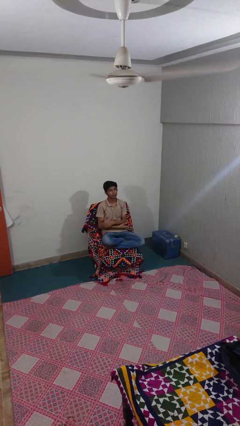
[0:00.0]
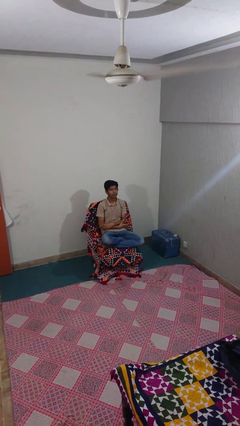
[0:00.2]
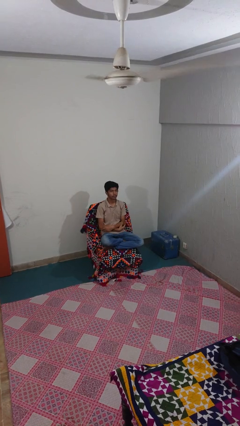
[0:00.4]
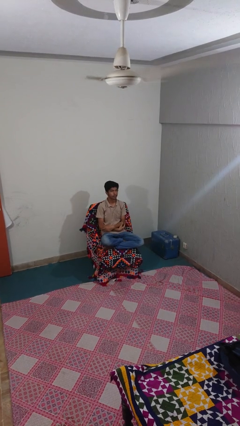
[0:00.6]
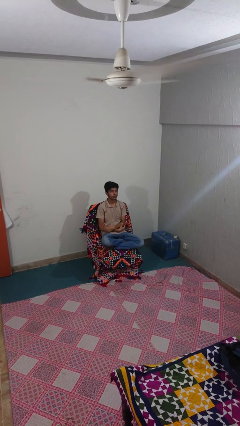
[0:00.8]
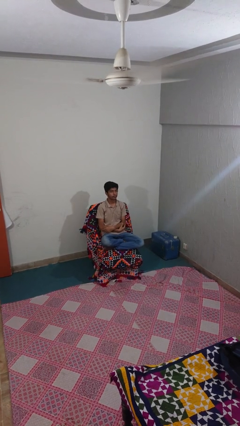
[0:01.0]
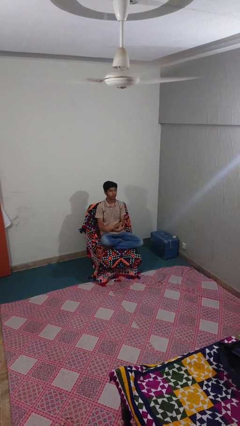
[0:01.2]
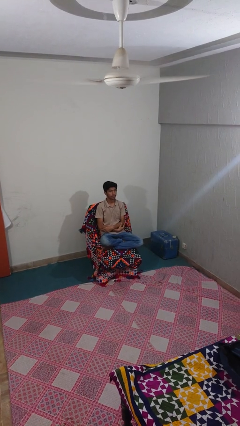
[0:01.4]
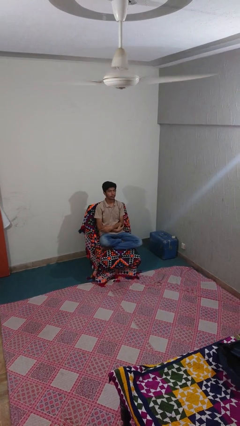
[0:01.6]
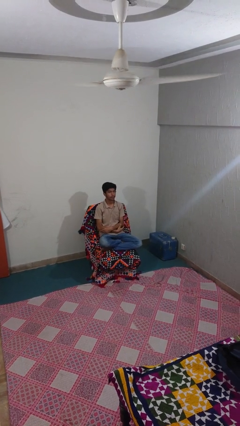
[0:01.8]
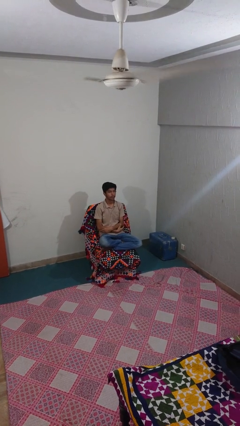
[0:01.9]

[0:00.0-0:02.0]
person gestures lower hand

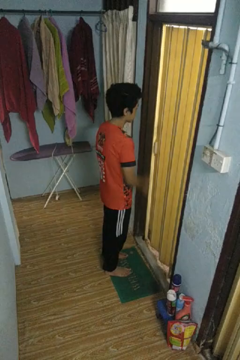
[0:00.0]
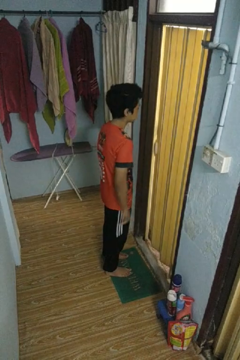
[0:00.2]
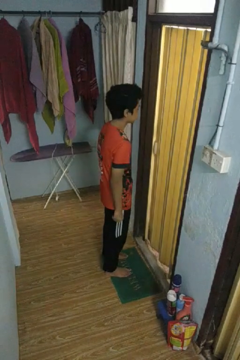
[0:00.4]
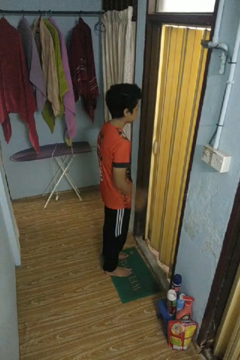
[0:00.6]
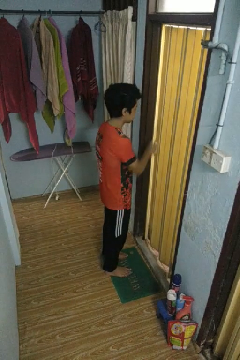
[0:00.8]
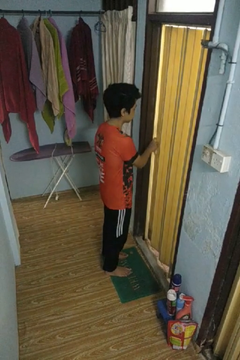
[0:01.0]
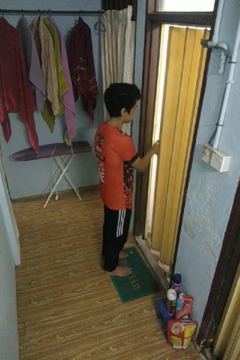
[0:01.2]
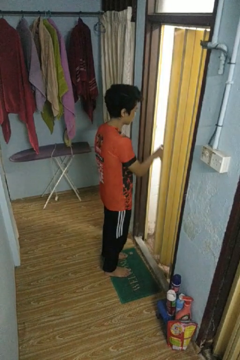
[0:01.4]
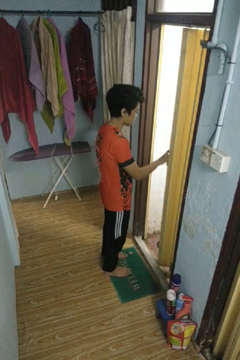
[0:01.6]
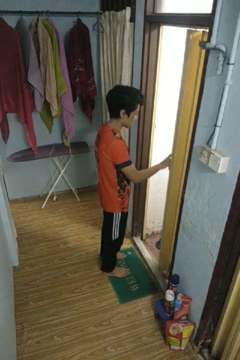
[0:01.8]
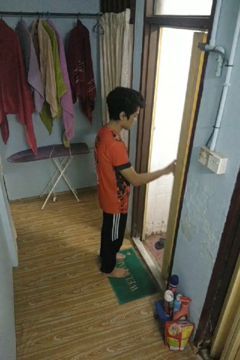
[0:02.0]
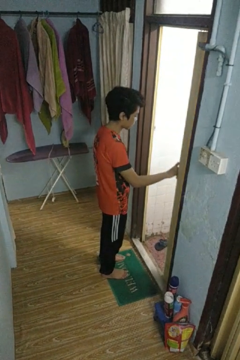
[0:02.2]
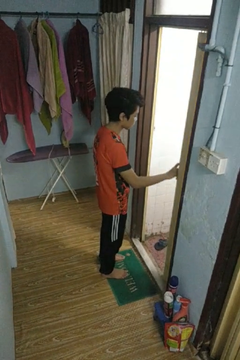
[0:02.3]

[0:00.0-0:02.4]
person opens sliding door

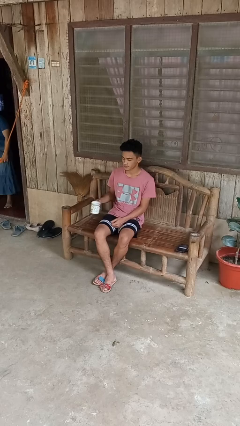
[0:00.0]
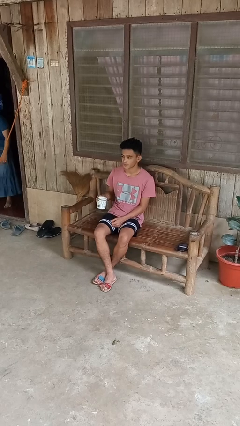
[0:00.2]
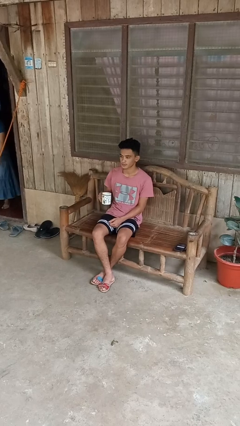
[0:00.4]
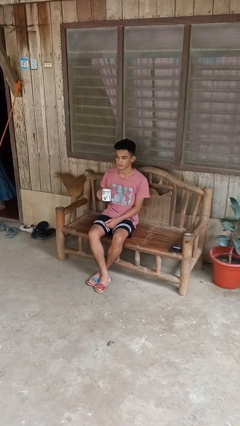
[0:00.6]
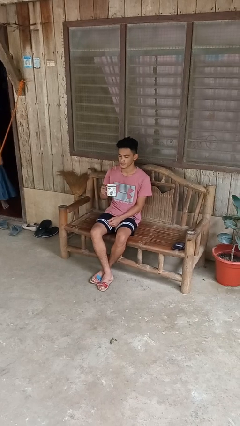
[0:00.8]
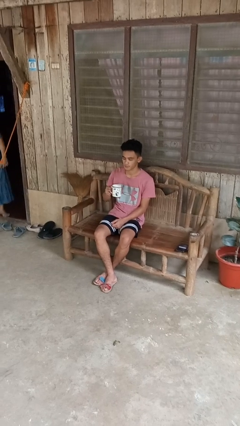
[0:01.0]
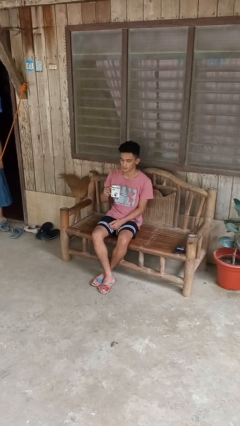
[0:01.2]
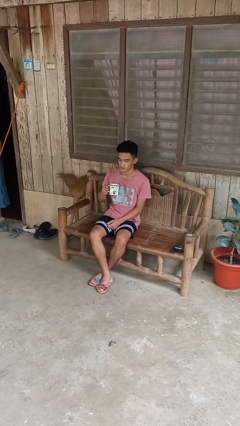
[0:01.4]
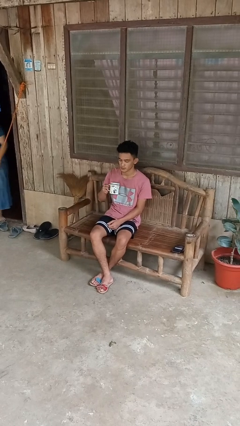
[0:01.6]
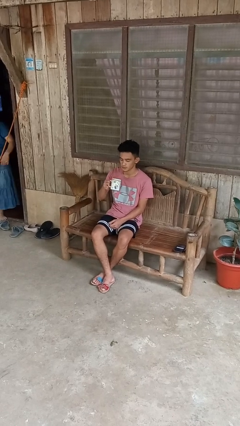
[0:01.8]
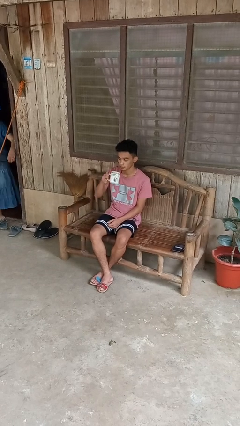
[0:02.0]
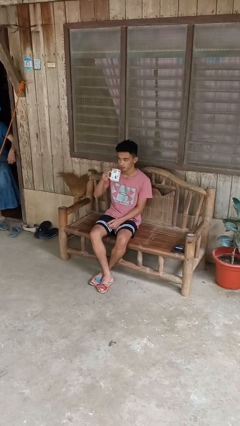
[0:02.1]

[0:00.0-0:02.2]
person picks up object from table

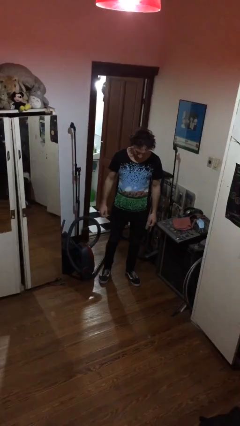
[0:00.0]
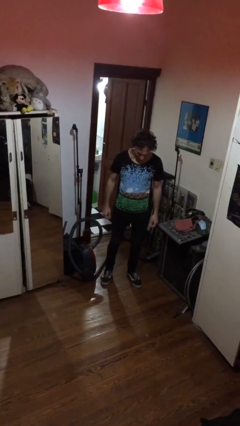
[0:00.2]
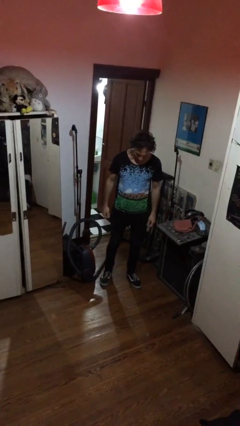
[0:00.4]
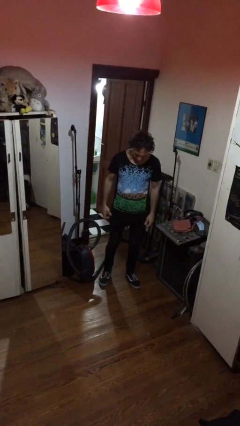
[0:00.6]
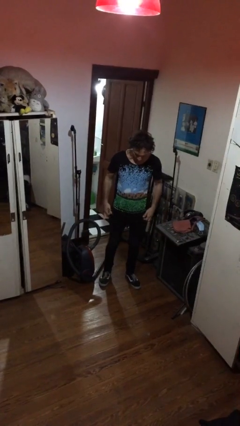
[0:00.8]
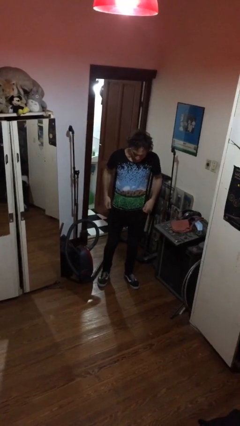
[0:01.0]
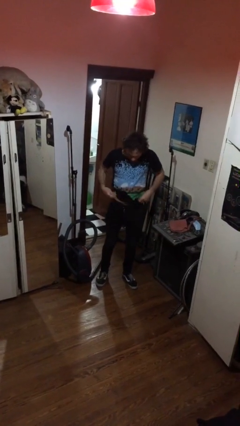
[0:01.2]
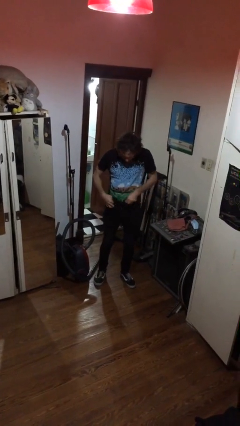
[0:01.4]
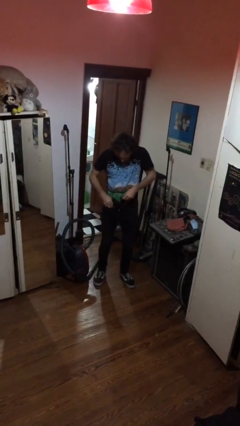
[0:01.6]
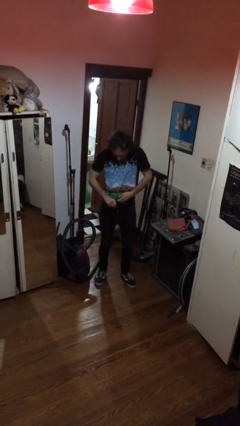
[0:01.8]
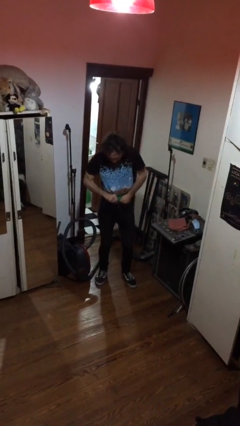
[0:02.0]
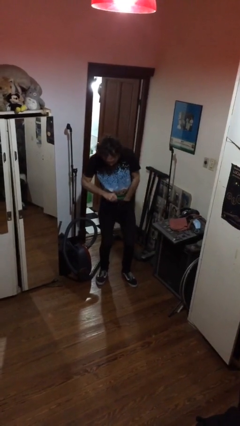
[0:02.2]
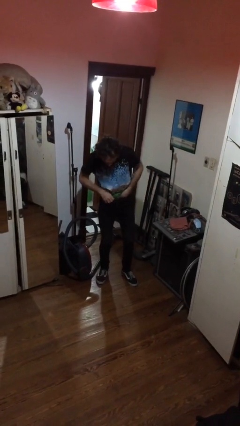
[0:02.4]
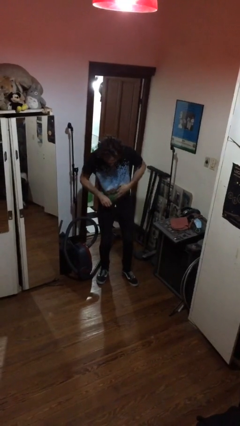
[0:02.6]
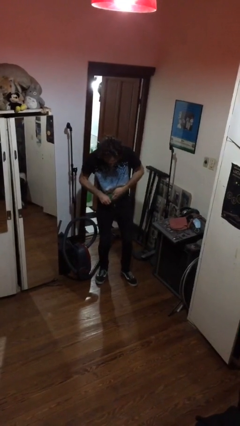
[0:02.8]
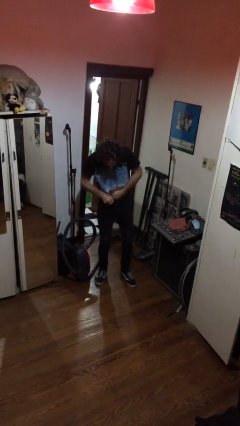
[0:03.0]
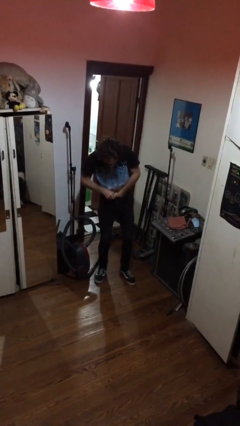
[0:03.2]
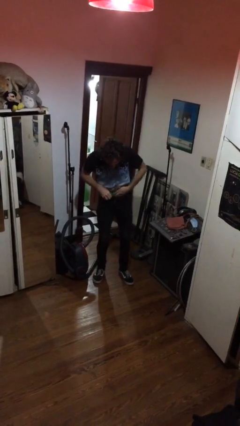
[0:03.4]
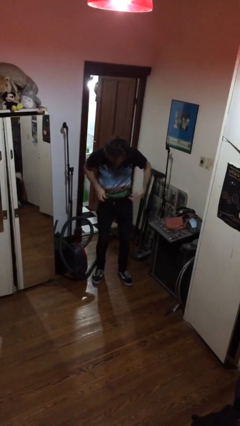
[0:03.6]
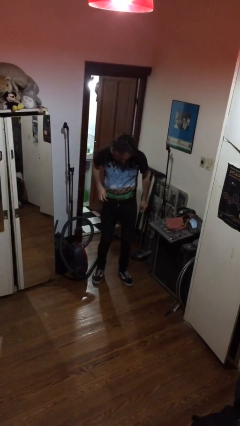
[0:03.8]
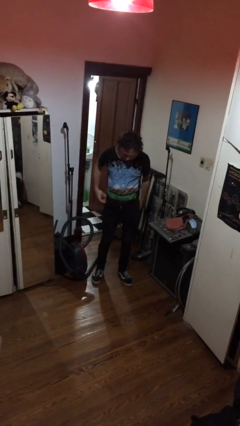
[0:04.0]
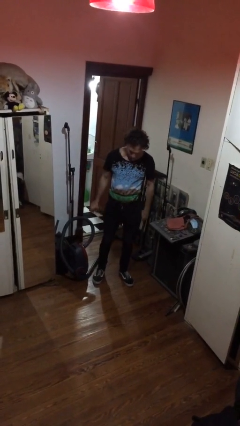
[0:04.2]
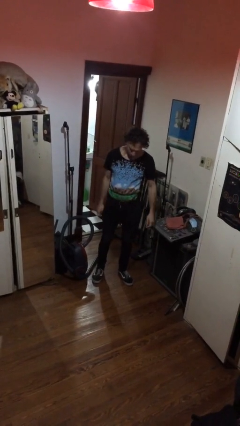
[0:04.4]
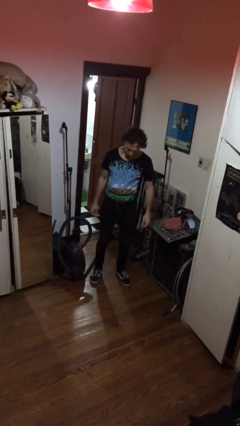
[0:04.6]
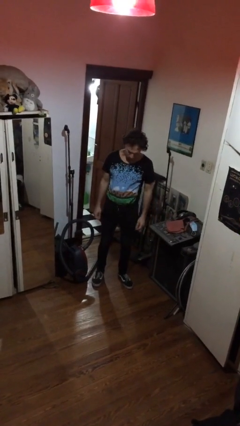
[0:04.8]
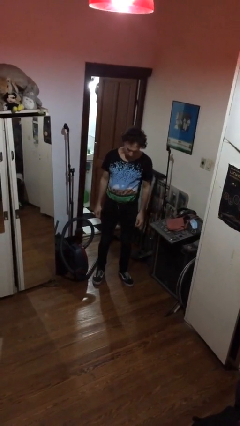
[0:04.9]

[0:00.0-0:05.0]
person tucks in shirt

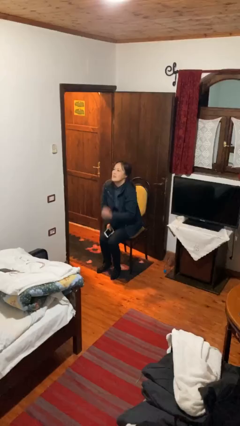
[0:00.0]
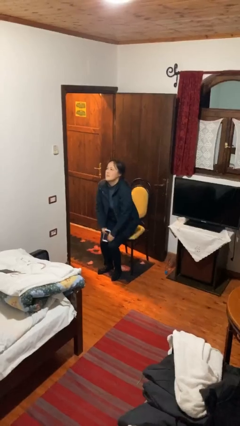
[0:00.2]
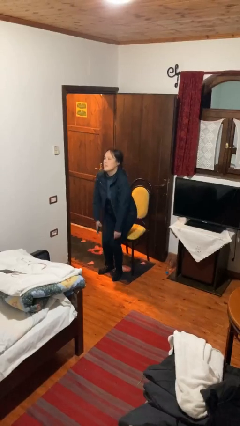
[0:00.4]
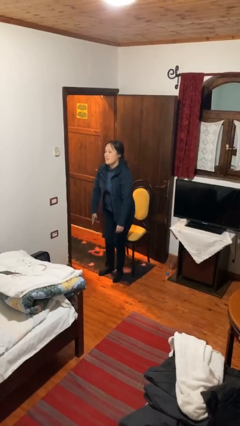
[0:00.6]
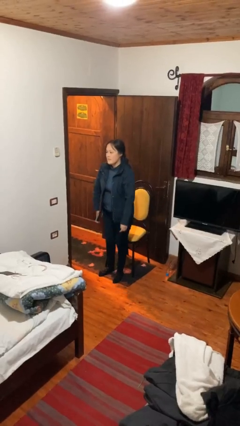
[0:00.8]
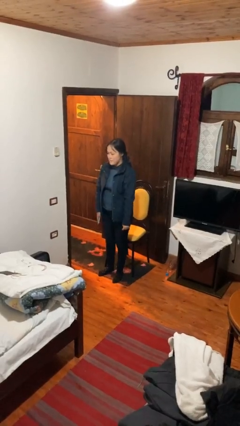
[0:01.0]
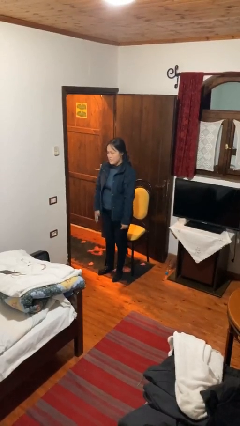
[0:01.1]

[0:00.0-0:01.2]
person stands up

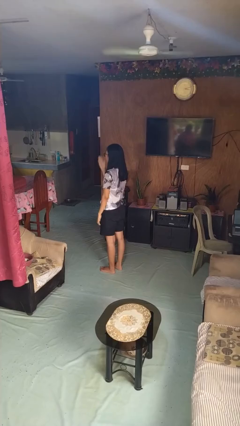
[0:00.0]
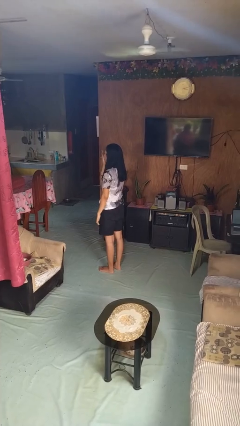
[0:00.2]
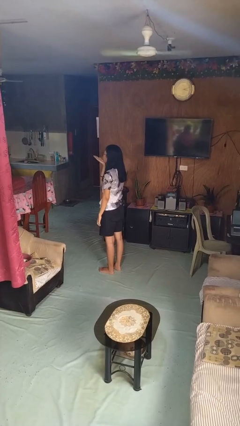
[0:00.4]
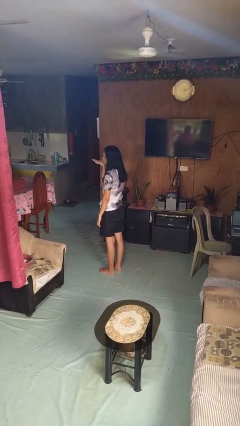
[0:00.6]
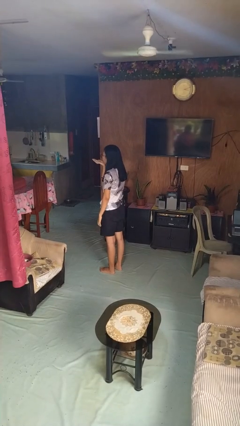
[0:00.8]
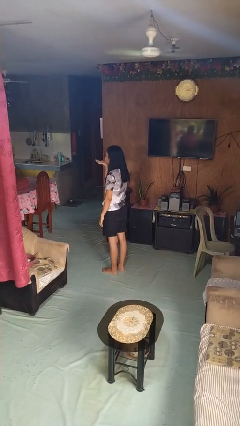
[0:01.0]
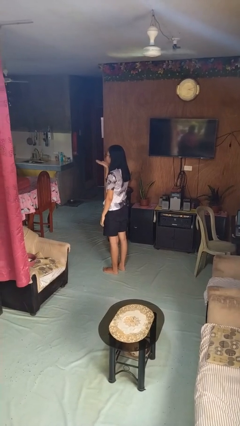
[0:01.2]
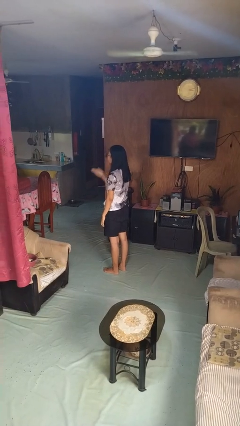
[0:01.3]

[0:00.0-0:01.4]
person gestures blow kiss

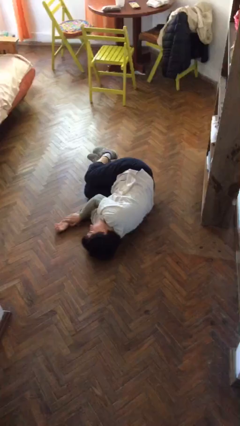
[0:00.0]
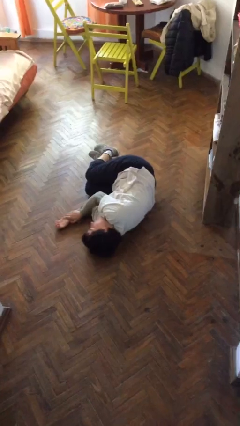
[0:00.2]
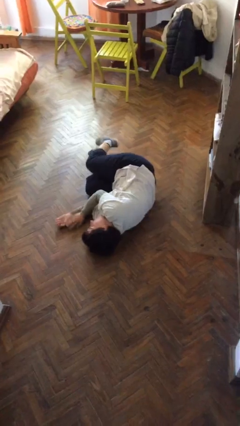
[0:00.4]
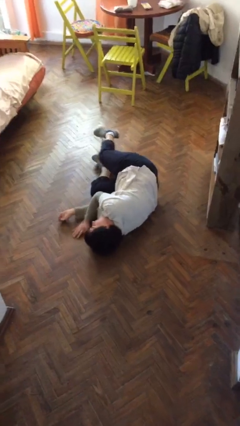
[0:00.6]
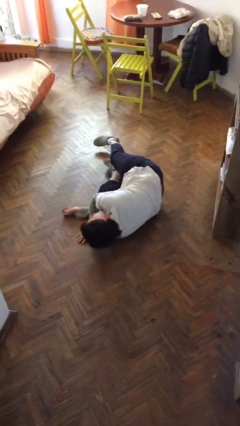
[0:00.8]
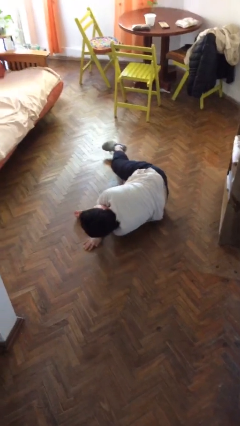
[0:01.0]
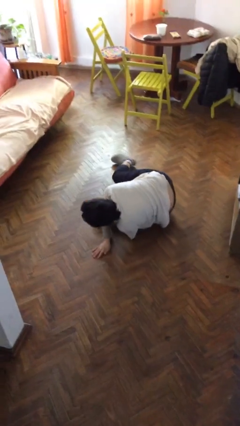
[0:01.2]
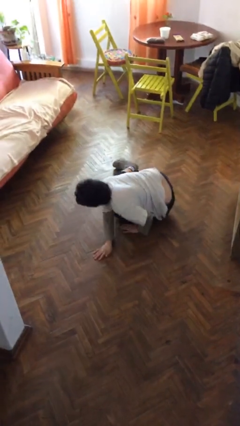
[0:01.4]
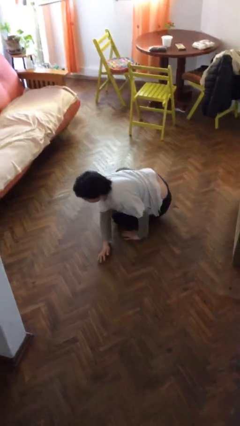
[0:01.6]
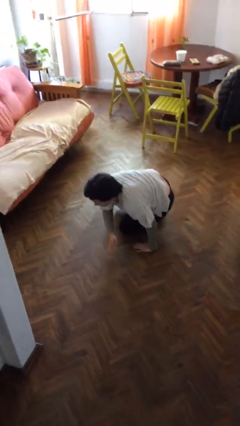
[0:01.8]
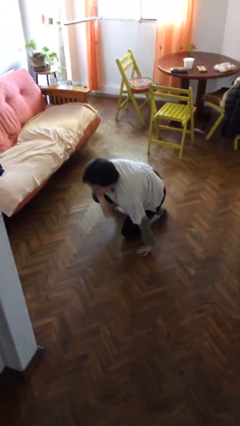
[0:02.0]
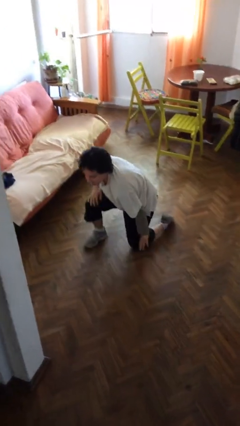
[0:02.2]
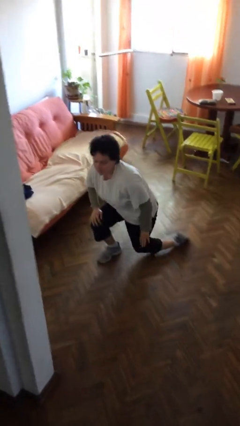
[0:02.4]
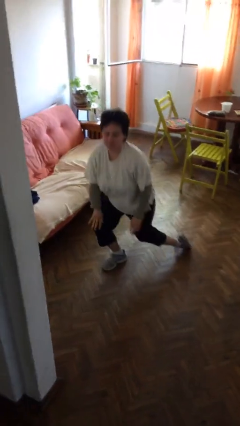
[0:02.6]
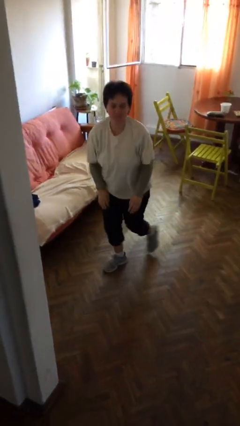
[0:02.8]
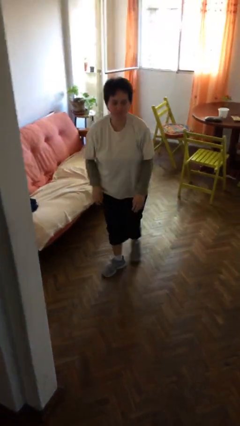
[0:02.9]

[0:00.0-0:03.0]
person stands up from floor

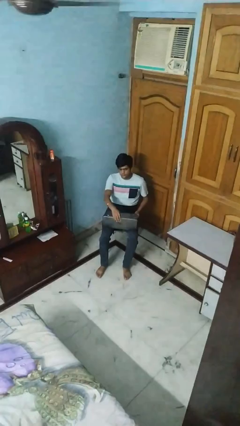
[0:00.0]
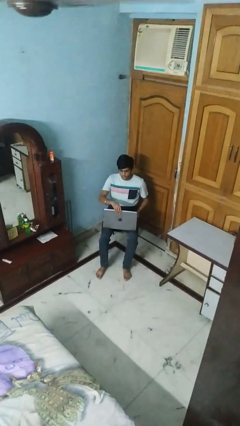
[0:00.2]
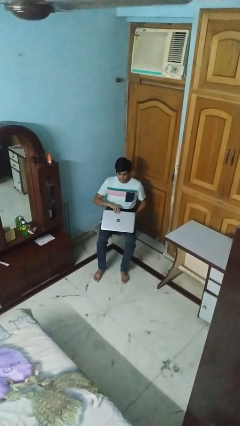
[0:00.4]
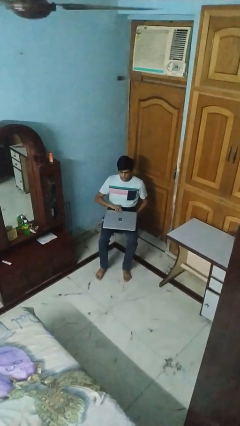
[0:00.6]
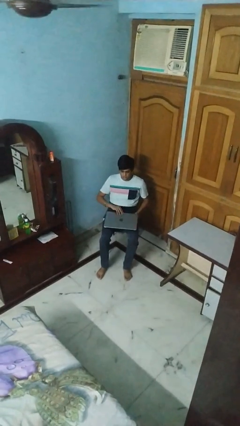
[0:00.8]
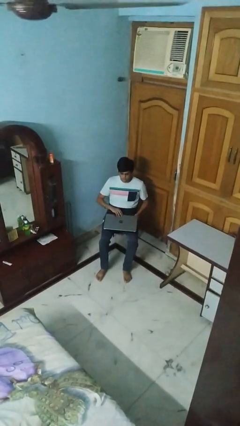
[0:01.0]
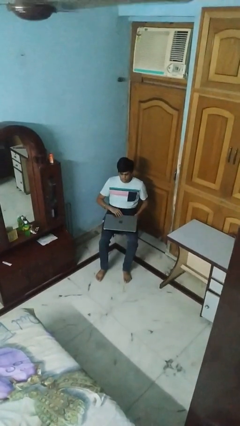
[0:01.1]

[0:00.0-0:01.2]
person closes laptop
